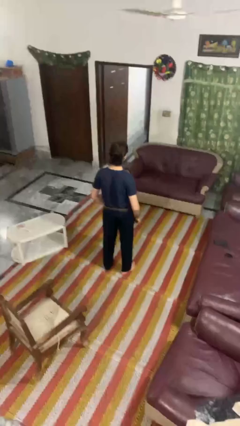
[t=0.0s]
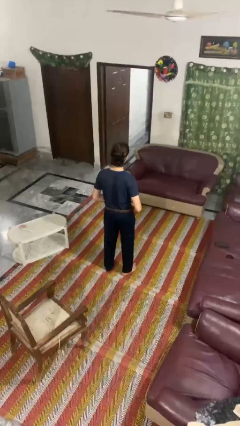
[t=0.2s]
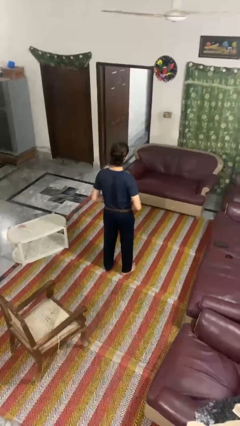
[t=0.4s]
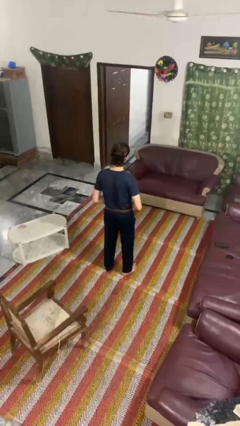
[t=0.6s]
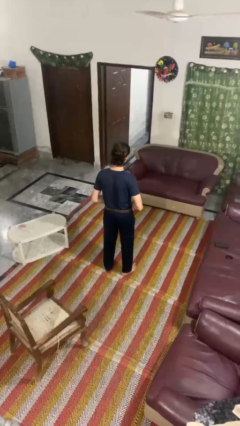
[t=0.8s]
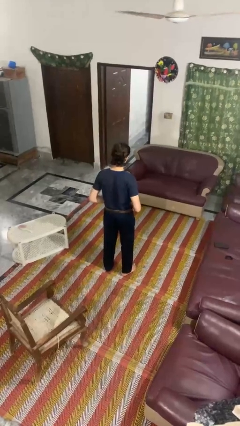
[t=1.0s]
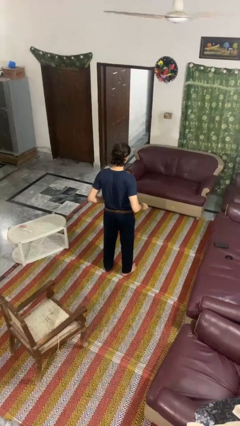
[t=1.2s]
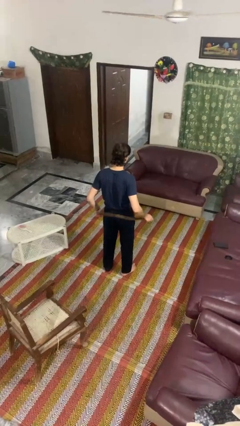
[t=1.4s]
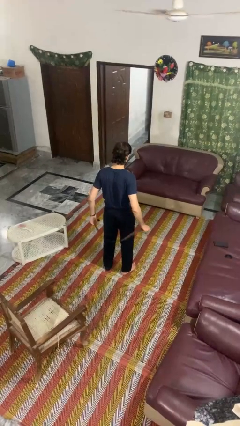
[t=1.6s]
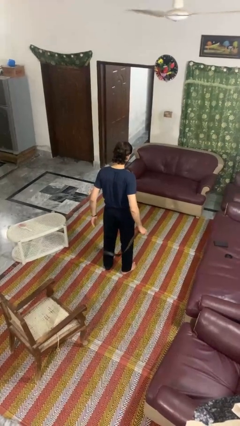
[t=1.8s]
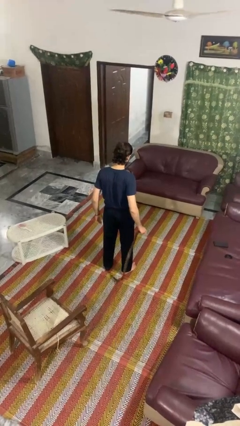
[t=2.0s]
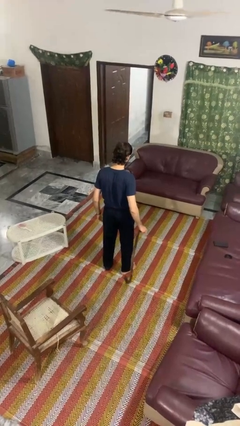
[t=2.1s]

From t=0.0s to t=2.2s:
person takes off belt

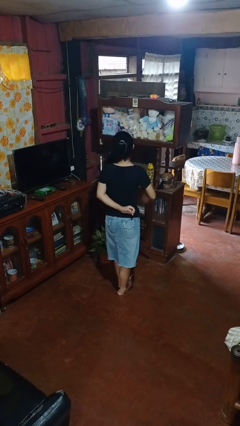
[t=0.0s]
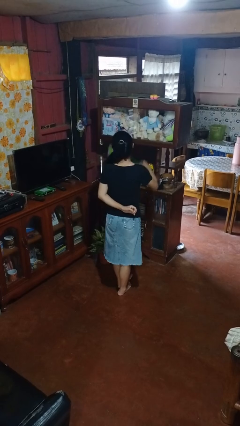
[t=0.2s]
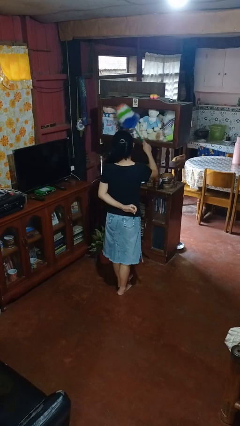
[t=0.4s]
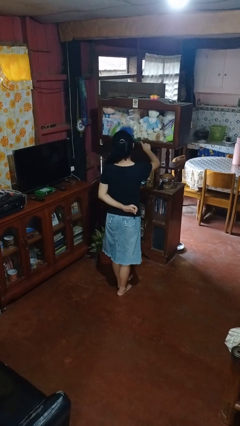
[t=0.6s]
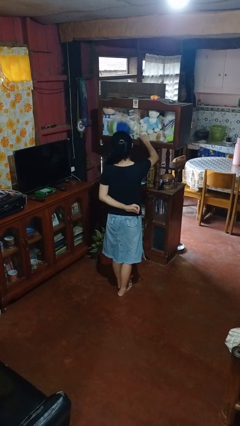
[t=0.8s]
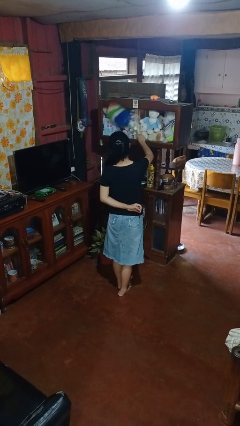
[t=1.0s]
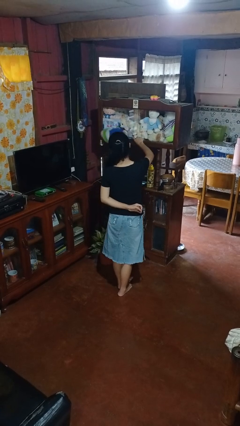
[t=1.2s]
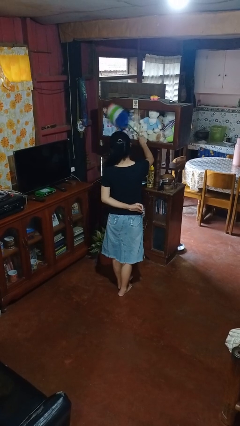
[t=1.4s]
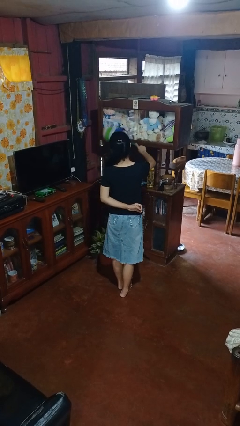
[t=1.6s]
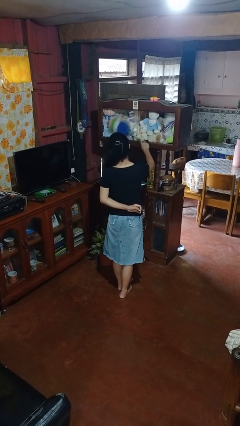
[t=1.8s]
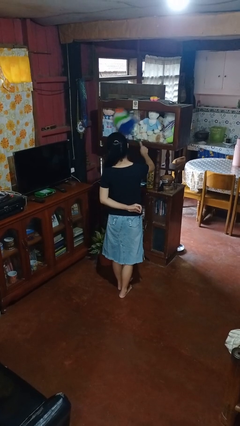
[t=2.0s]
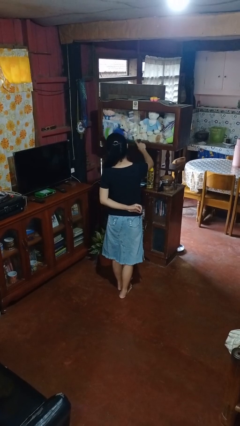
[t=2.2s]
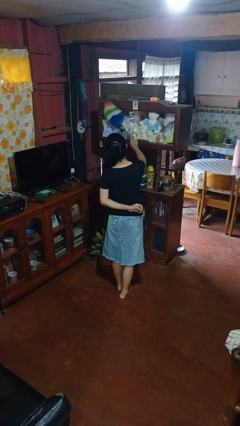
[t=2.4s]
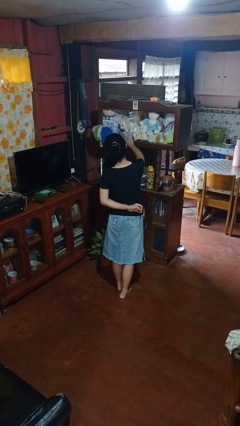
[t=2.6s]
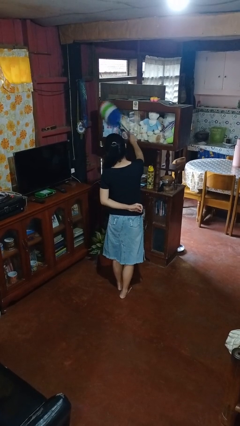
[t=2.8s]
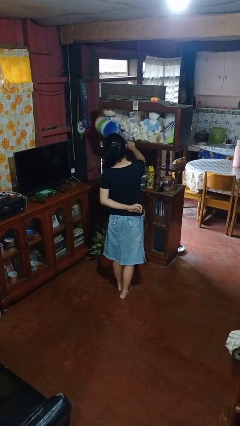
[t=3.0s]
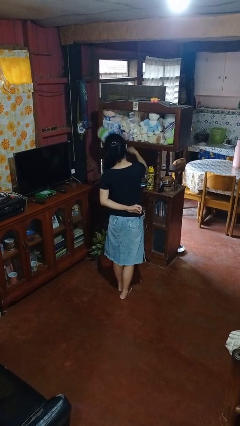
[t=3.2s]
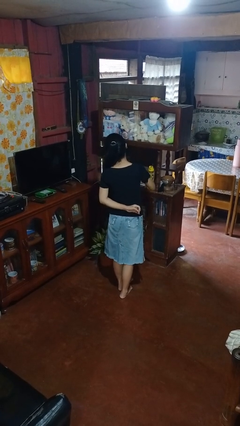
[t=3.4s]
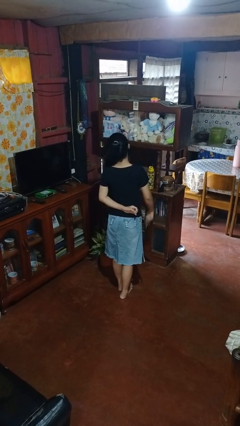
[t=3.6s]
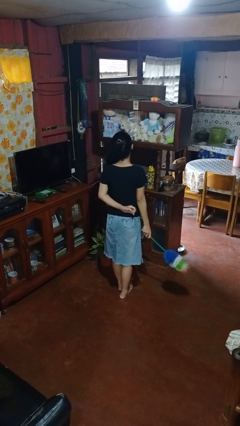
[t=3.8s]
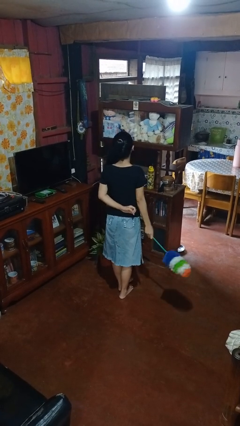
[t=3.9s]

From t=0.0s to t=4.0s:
person dusts furniture

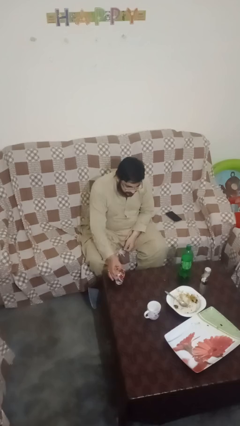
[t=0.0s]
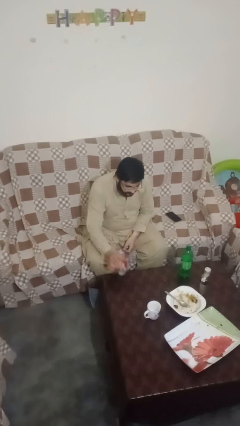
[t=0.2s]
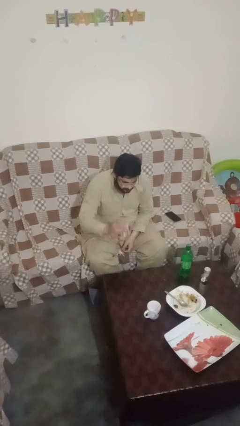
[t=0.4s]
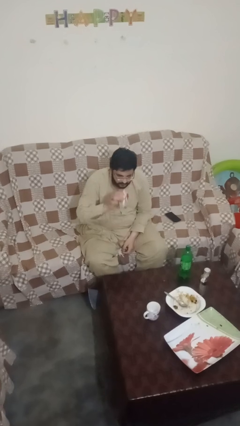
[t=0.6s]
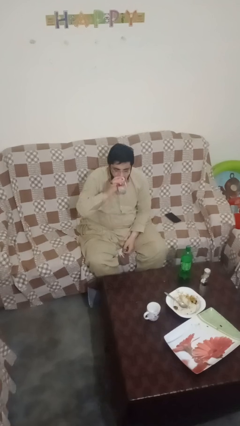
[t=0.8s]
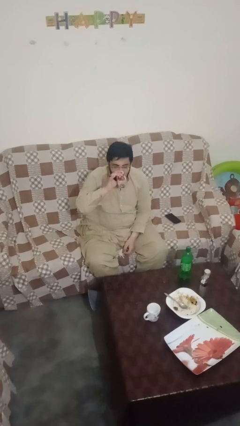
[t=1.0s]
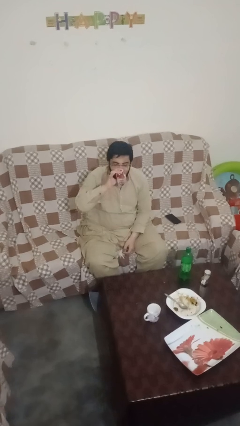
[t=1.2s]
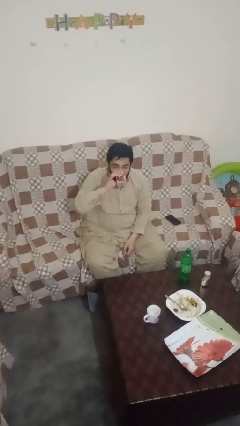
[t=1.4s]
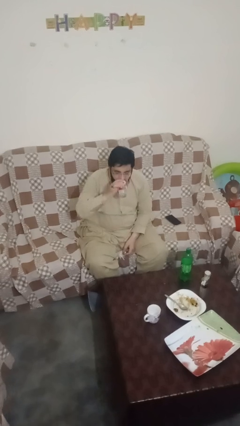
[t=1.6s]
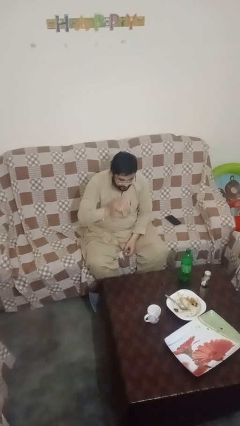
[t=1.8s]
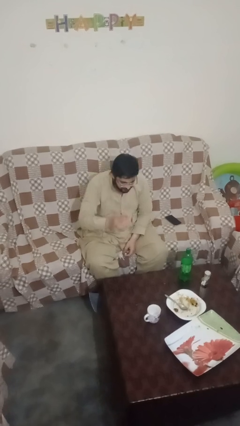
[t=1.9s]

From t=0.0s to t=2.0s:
person drinks from cup

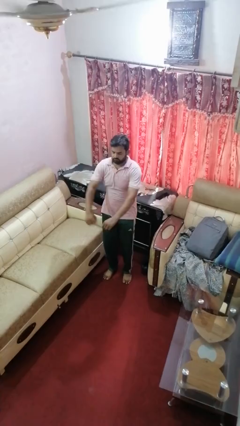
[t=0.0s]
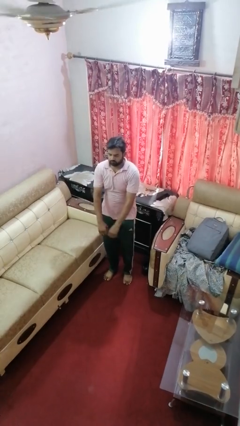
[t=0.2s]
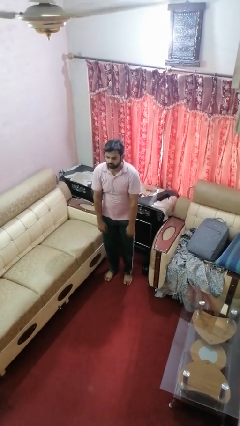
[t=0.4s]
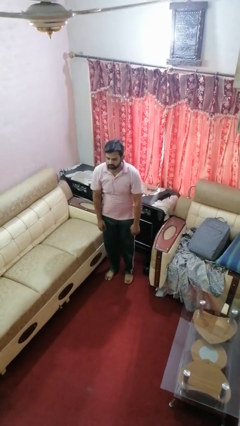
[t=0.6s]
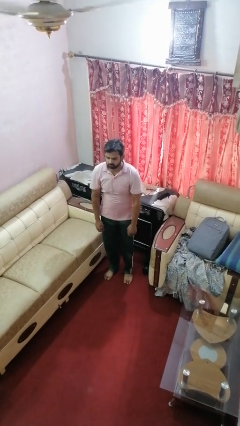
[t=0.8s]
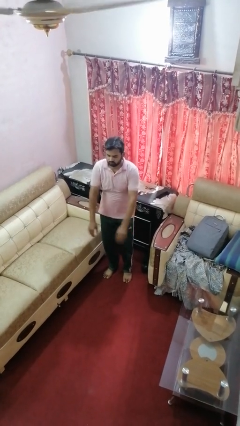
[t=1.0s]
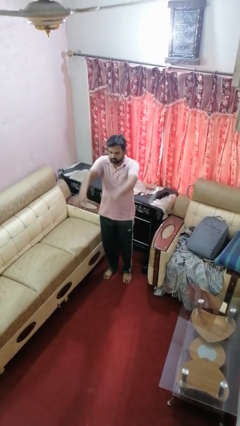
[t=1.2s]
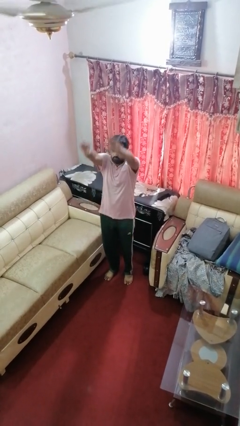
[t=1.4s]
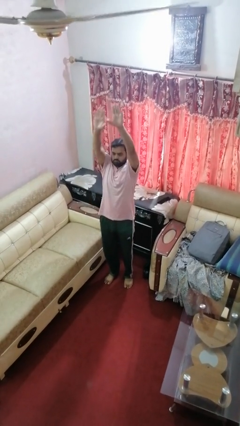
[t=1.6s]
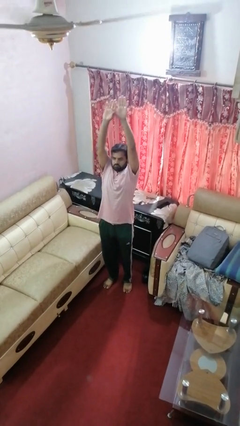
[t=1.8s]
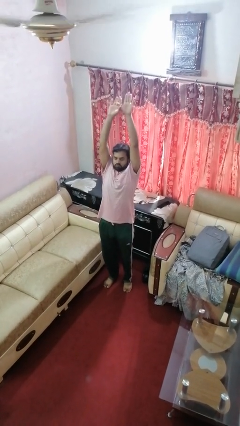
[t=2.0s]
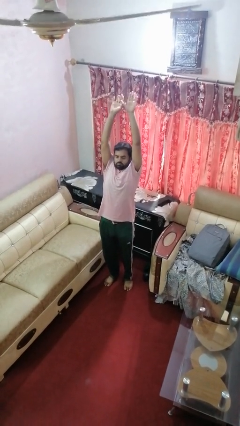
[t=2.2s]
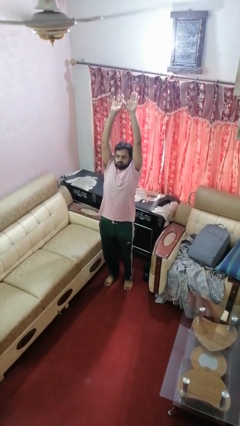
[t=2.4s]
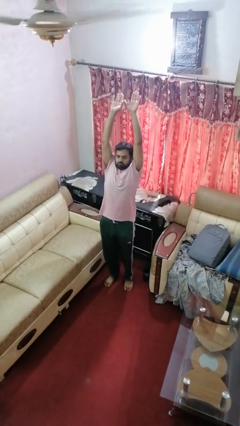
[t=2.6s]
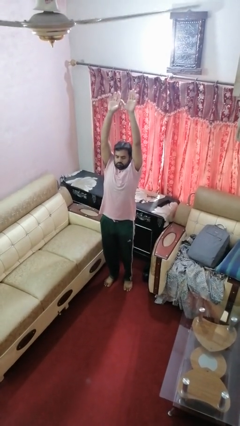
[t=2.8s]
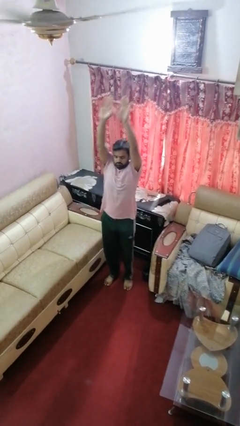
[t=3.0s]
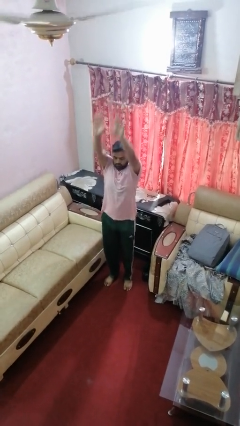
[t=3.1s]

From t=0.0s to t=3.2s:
person stretches arms over head

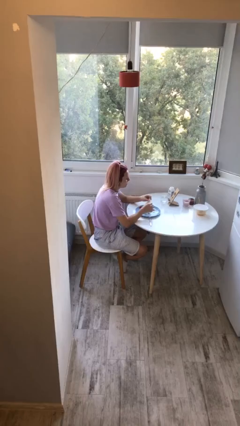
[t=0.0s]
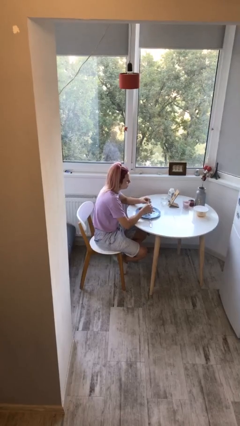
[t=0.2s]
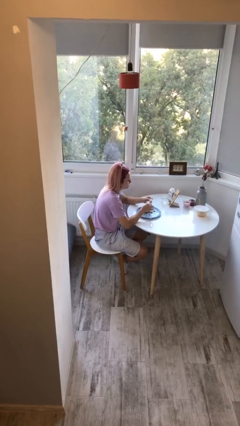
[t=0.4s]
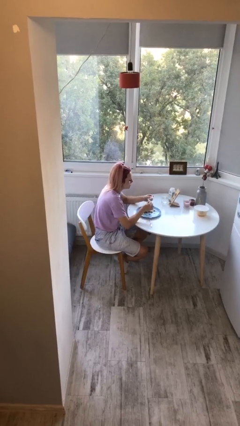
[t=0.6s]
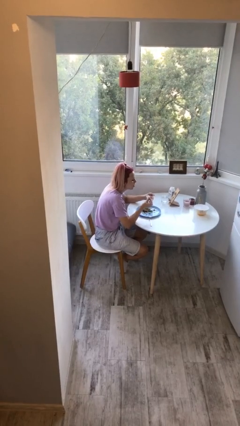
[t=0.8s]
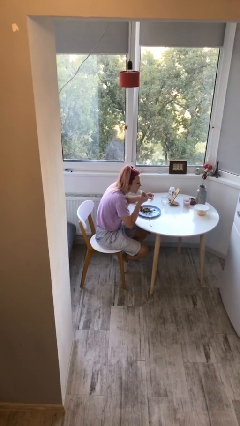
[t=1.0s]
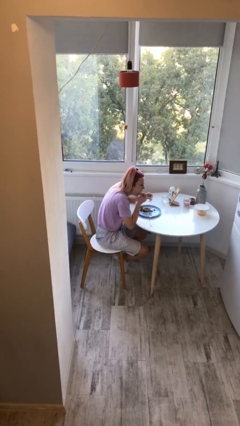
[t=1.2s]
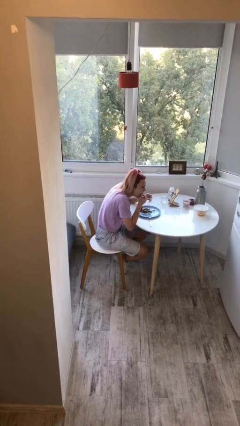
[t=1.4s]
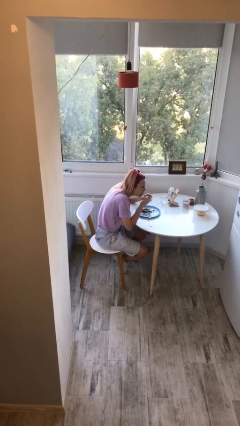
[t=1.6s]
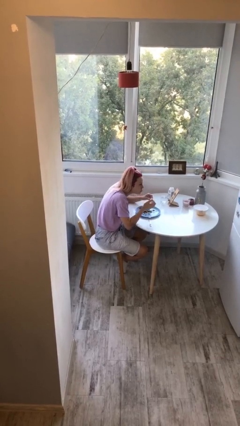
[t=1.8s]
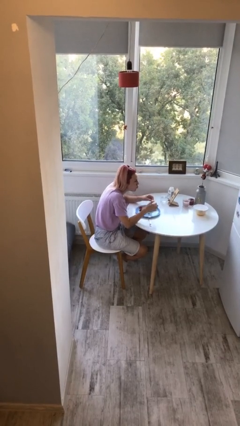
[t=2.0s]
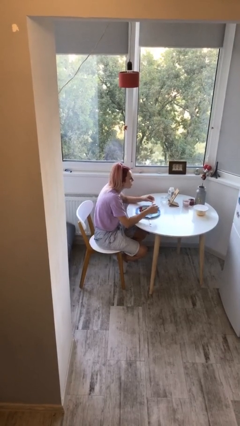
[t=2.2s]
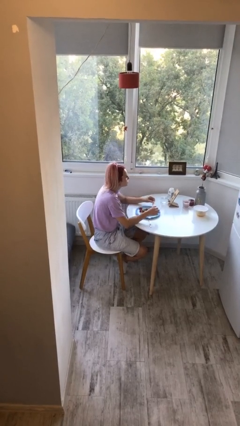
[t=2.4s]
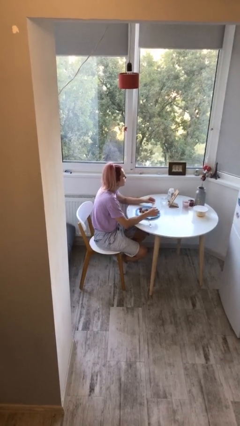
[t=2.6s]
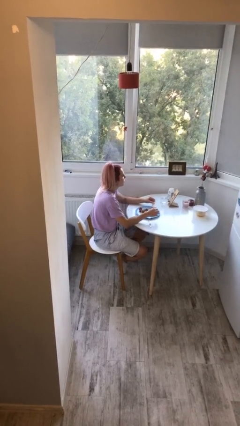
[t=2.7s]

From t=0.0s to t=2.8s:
person eats with hands

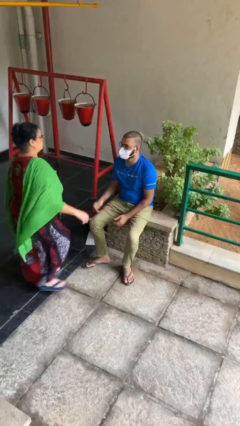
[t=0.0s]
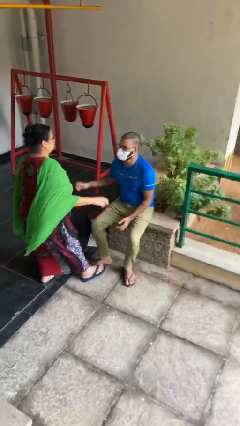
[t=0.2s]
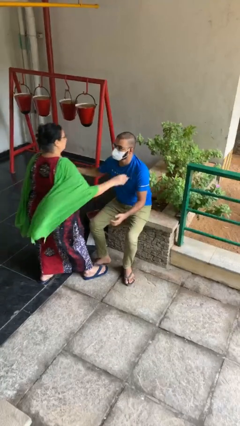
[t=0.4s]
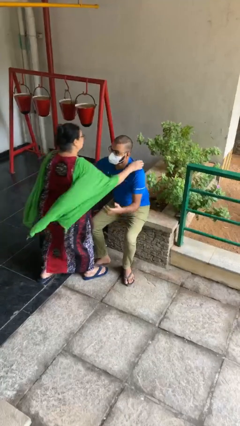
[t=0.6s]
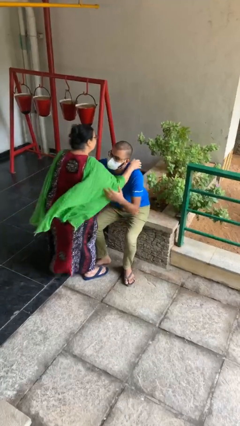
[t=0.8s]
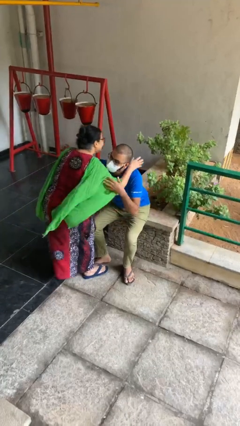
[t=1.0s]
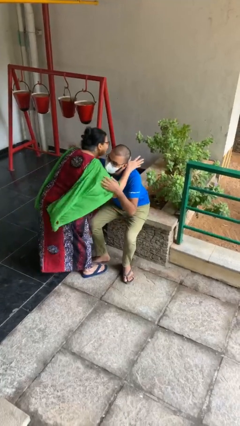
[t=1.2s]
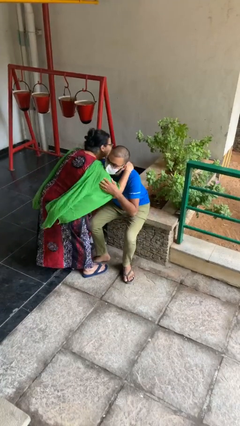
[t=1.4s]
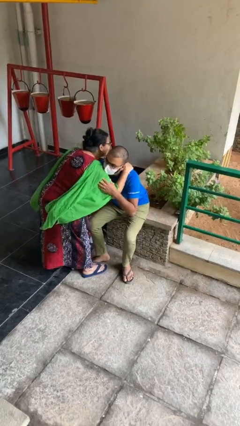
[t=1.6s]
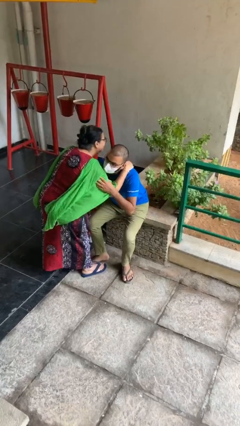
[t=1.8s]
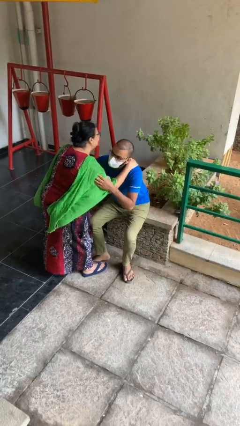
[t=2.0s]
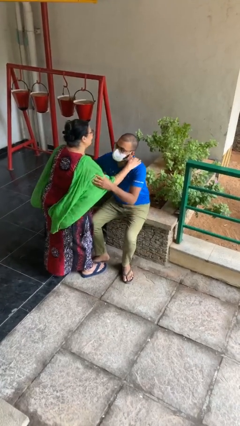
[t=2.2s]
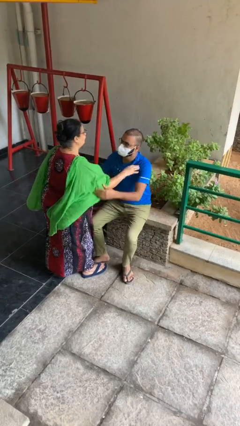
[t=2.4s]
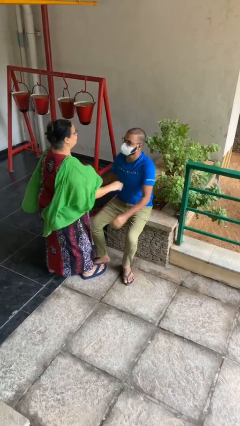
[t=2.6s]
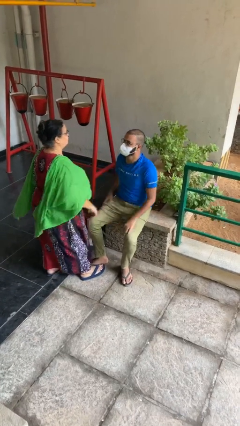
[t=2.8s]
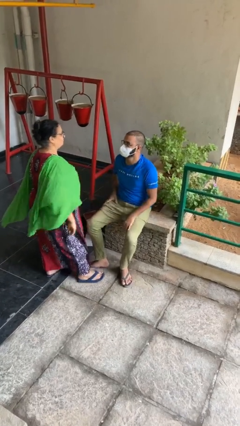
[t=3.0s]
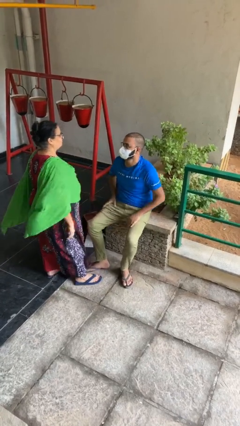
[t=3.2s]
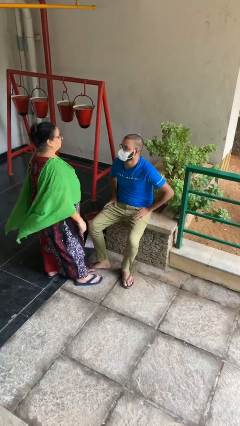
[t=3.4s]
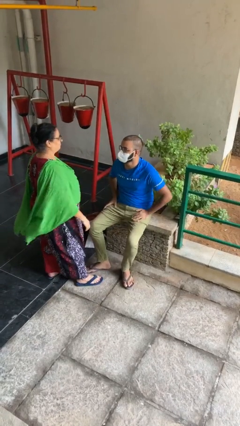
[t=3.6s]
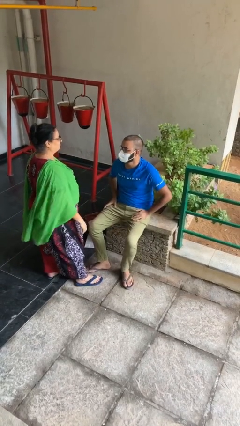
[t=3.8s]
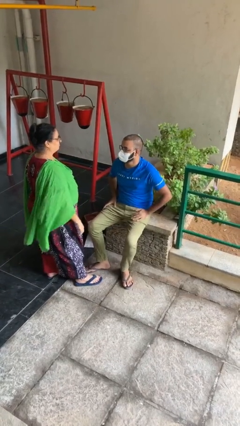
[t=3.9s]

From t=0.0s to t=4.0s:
person embraces person
